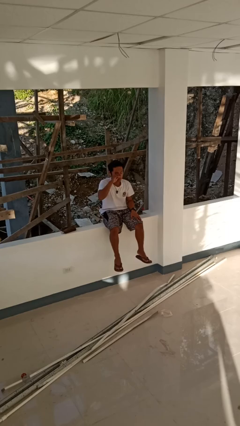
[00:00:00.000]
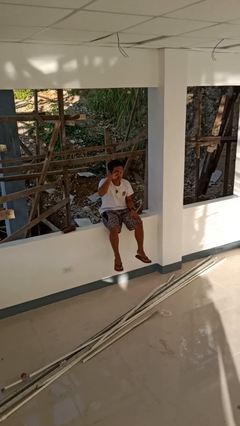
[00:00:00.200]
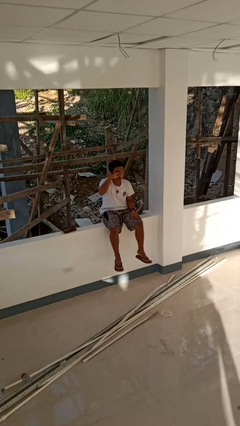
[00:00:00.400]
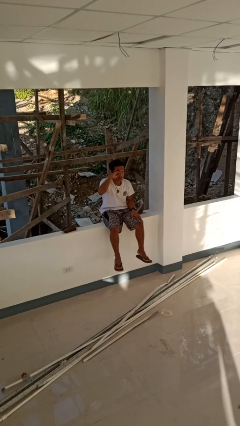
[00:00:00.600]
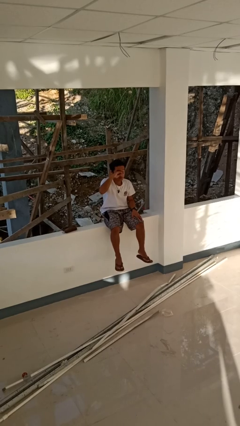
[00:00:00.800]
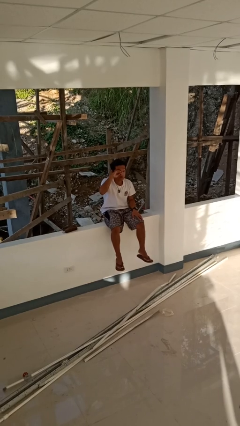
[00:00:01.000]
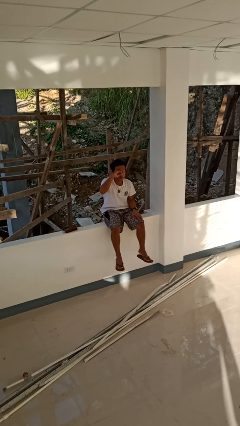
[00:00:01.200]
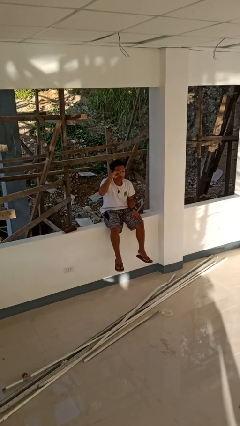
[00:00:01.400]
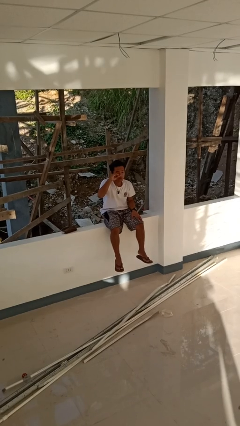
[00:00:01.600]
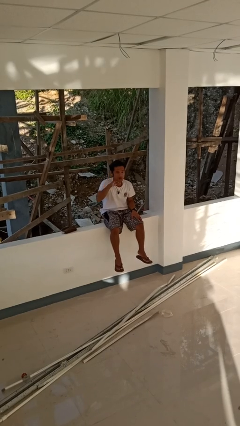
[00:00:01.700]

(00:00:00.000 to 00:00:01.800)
person rubs eyes

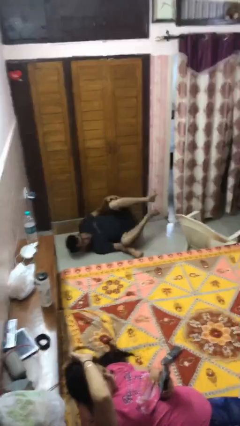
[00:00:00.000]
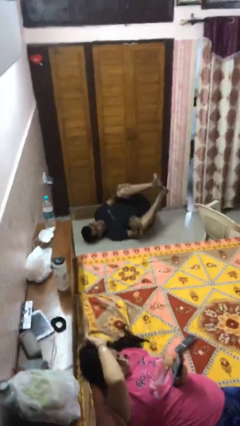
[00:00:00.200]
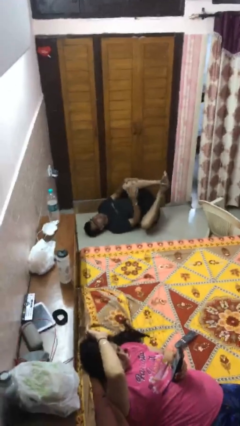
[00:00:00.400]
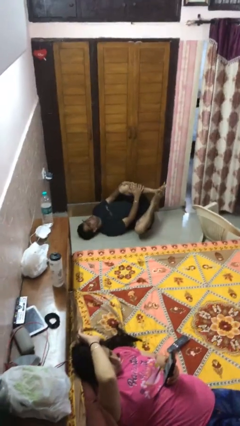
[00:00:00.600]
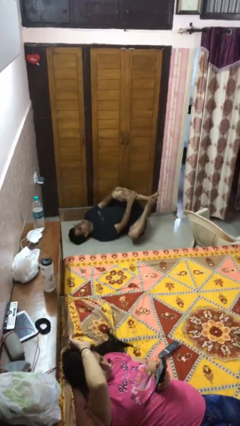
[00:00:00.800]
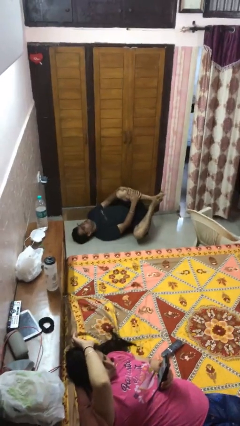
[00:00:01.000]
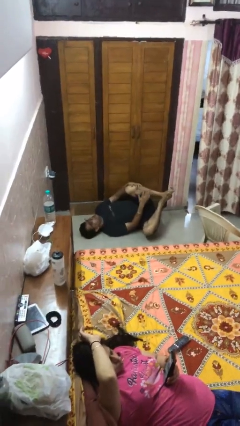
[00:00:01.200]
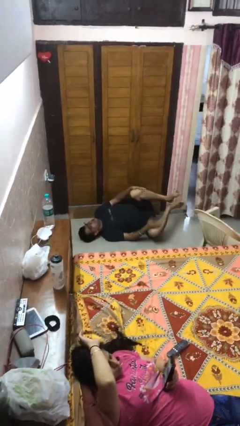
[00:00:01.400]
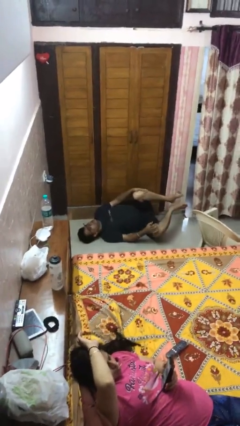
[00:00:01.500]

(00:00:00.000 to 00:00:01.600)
person lies down on floor

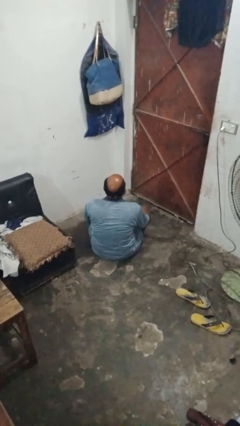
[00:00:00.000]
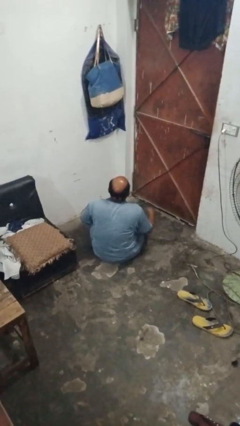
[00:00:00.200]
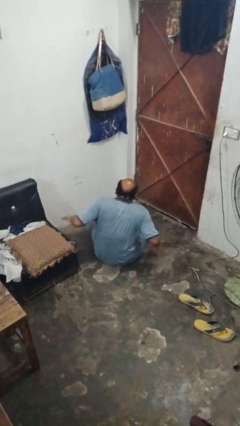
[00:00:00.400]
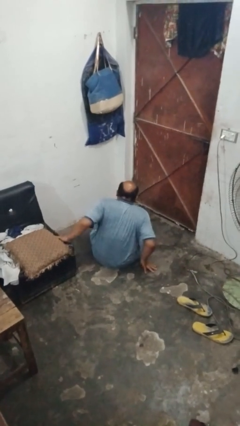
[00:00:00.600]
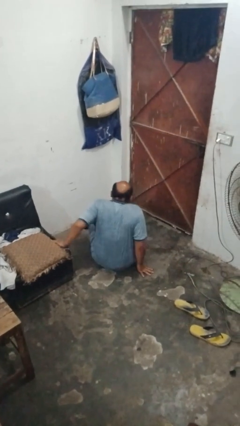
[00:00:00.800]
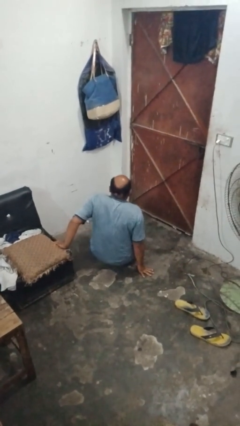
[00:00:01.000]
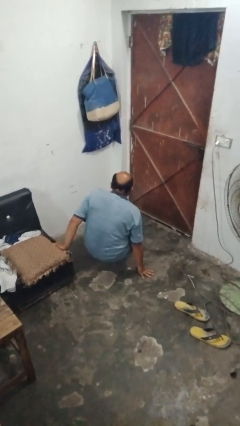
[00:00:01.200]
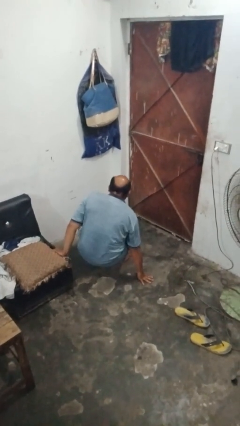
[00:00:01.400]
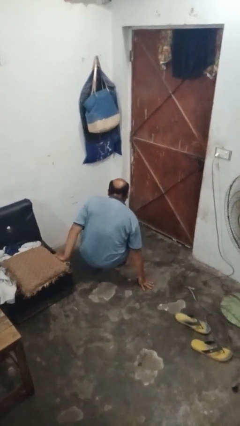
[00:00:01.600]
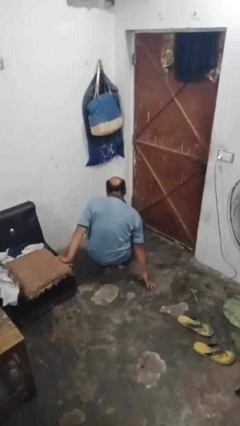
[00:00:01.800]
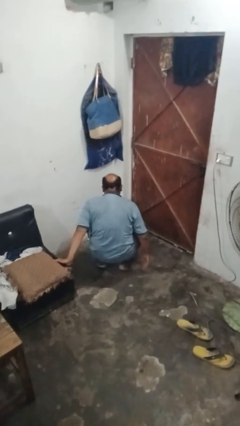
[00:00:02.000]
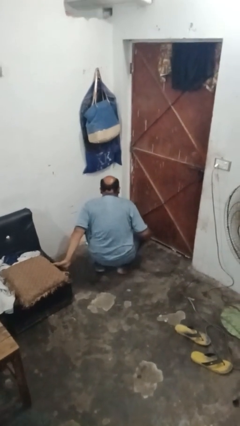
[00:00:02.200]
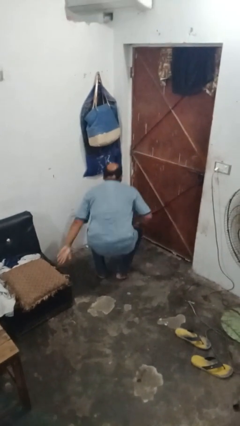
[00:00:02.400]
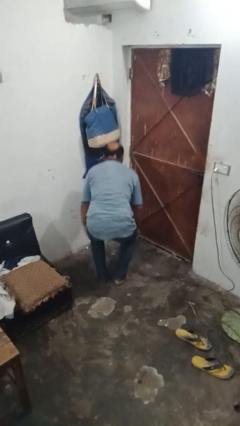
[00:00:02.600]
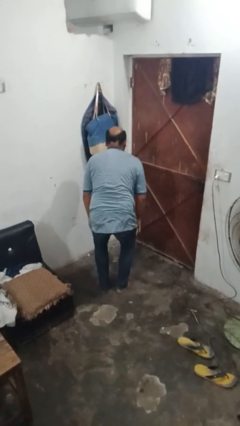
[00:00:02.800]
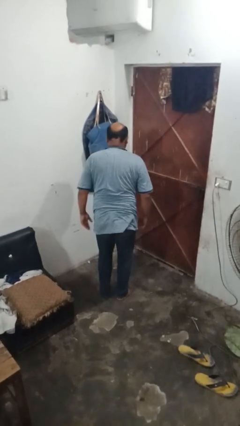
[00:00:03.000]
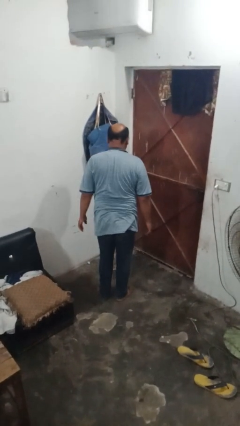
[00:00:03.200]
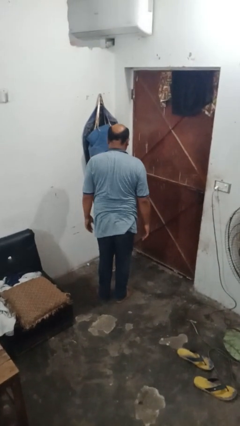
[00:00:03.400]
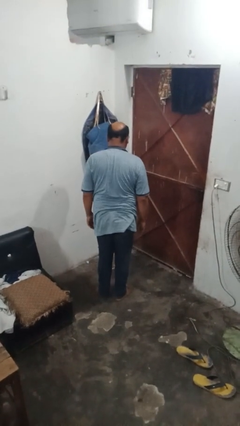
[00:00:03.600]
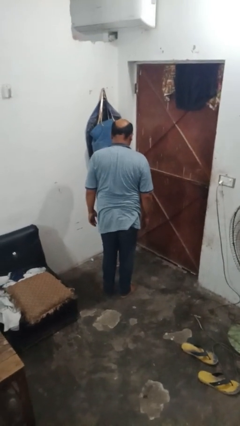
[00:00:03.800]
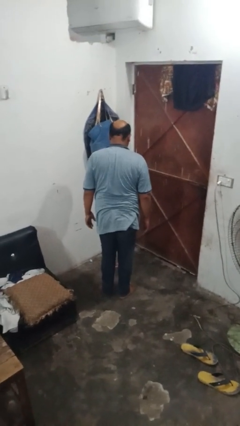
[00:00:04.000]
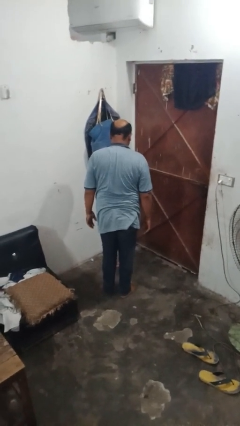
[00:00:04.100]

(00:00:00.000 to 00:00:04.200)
person stands up from floor

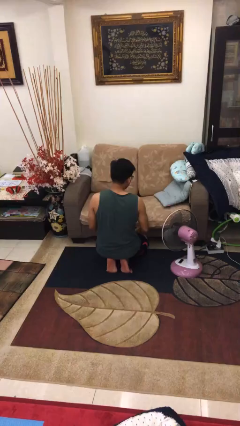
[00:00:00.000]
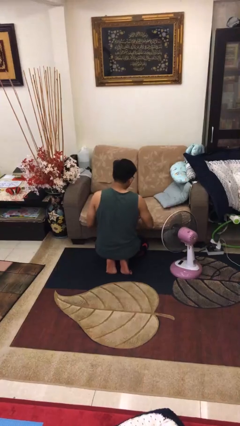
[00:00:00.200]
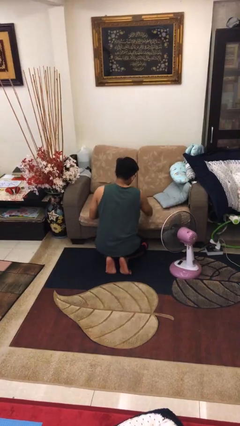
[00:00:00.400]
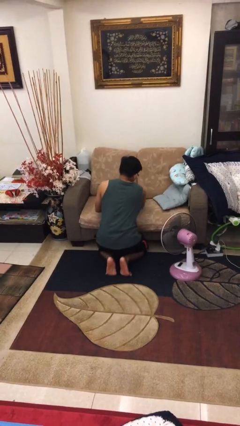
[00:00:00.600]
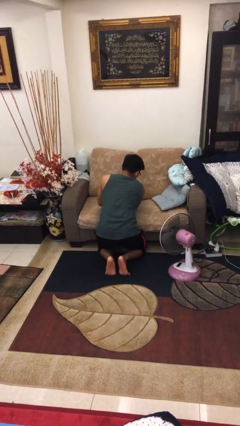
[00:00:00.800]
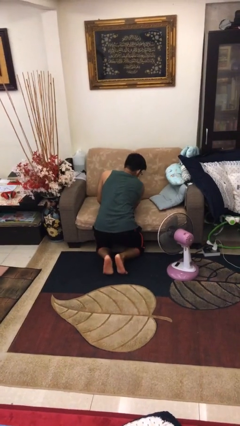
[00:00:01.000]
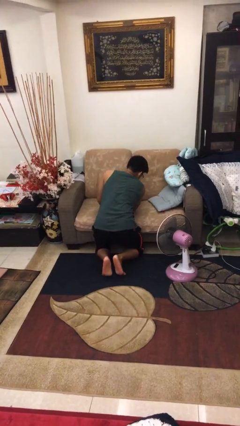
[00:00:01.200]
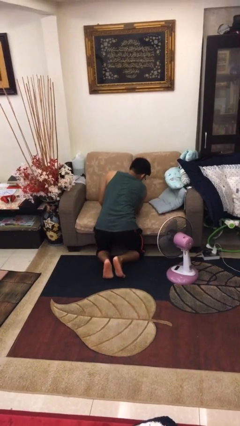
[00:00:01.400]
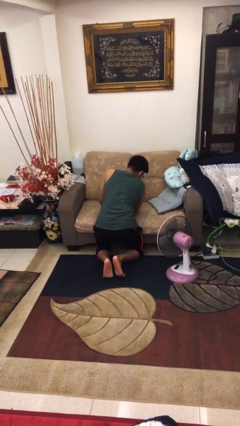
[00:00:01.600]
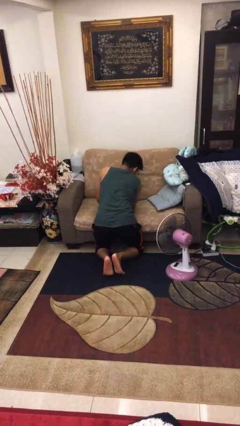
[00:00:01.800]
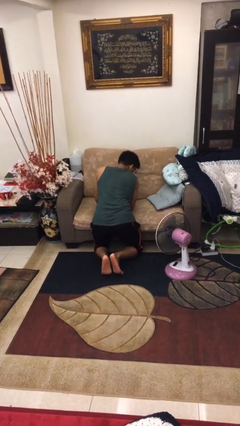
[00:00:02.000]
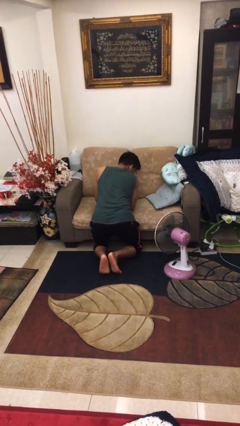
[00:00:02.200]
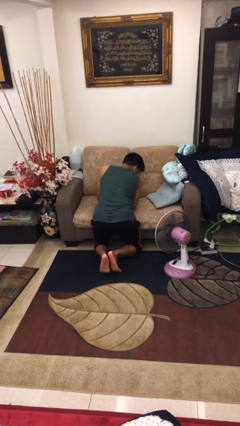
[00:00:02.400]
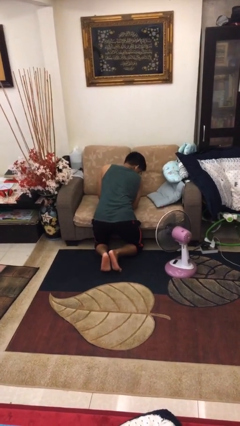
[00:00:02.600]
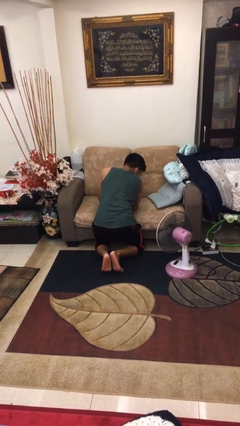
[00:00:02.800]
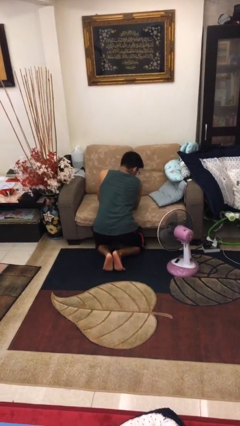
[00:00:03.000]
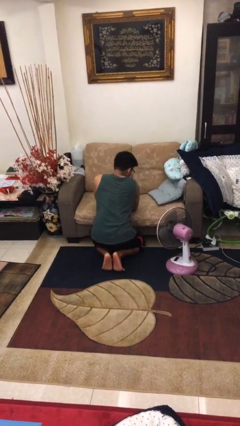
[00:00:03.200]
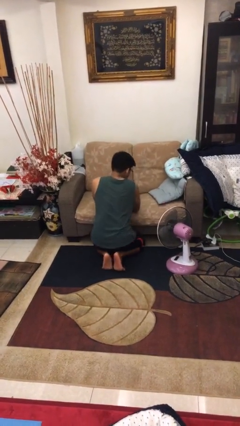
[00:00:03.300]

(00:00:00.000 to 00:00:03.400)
person searches in couch

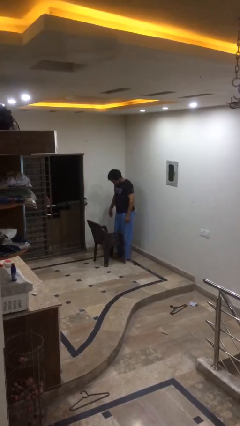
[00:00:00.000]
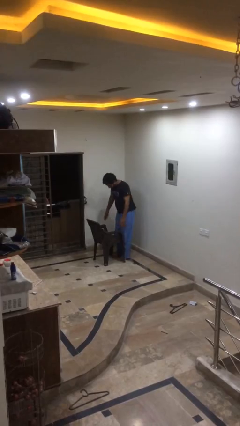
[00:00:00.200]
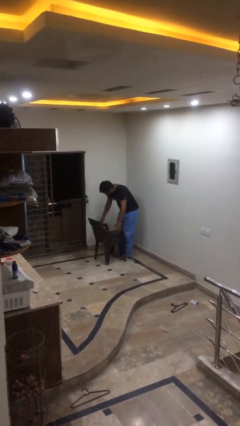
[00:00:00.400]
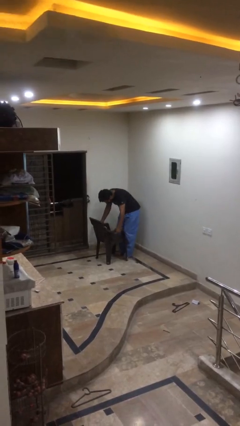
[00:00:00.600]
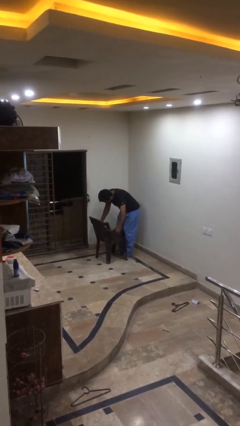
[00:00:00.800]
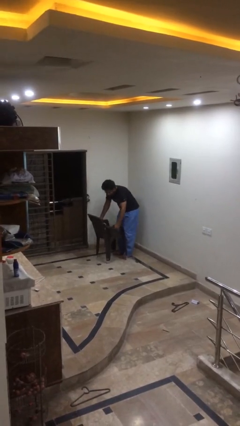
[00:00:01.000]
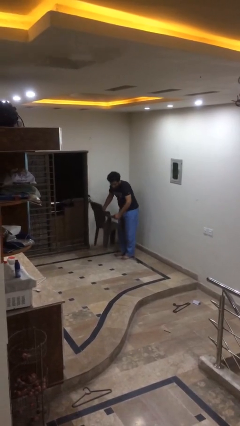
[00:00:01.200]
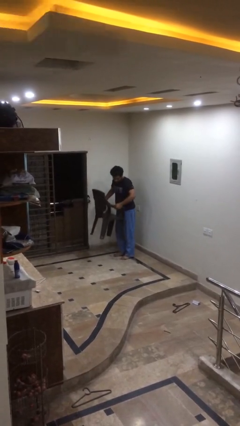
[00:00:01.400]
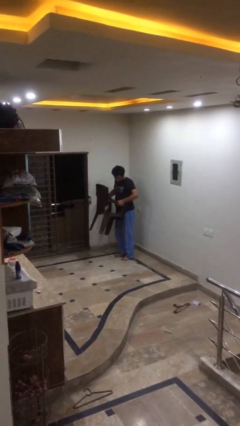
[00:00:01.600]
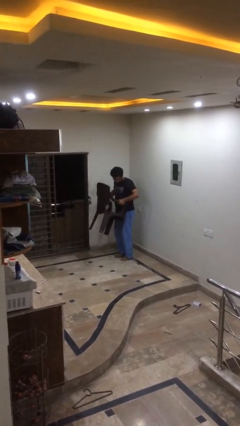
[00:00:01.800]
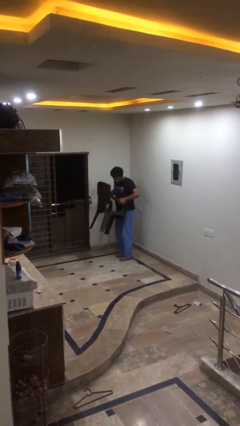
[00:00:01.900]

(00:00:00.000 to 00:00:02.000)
person picks up object from floor

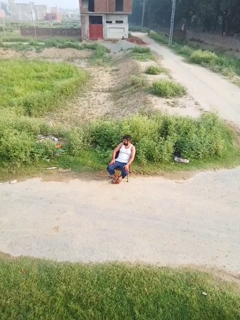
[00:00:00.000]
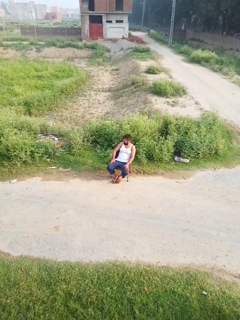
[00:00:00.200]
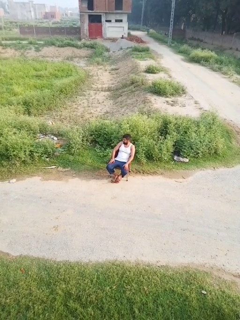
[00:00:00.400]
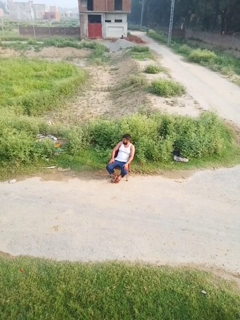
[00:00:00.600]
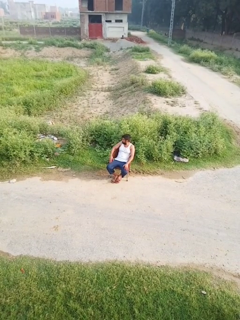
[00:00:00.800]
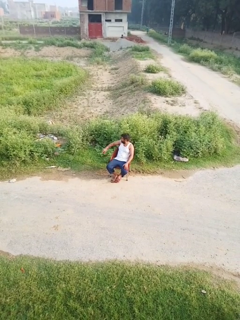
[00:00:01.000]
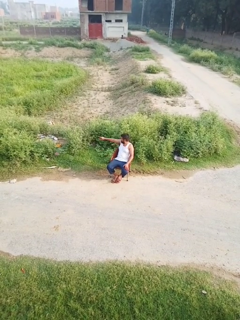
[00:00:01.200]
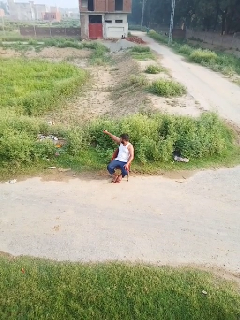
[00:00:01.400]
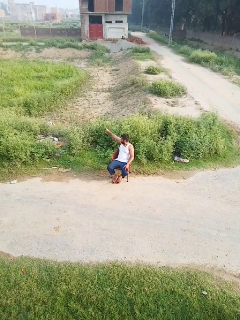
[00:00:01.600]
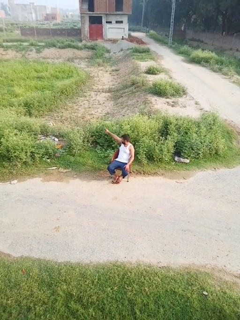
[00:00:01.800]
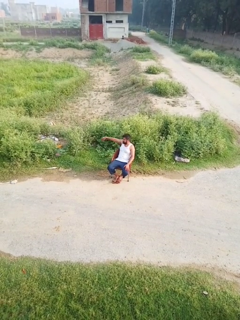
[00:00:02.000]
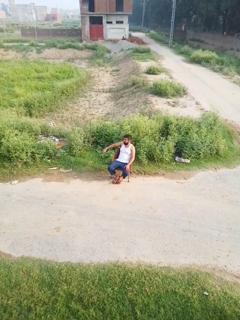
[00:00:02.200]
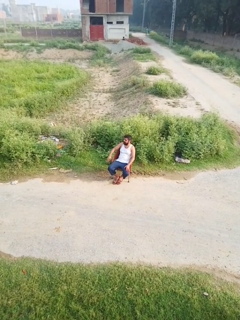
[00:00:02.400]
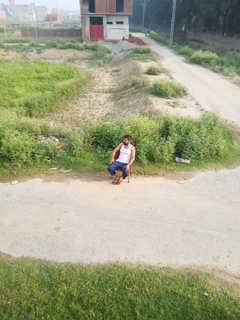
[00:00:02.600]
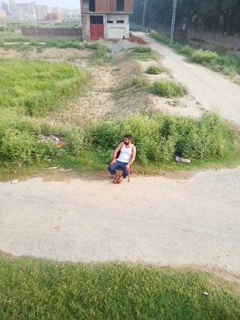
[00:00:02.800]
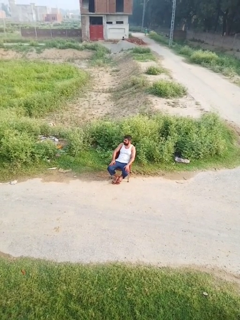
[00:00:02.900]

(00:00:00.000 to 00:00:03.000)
person points at person

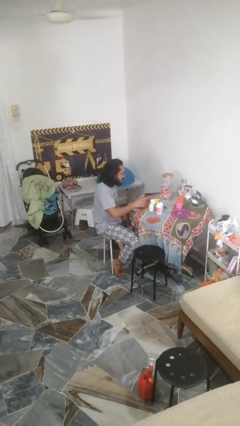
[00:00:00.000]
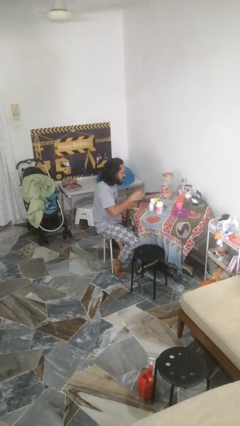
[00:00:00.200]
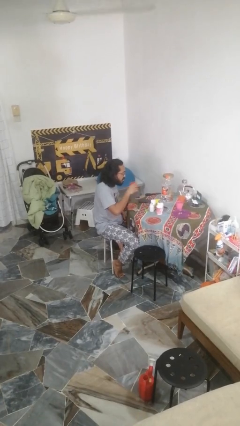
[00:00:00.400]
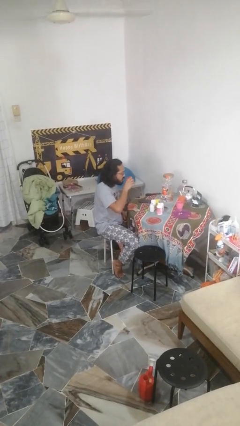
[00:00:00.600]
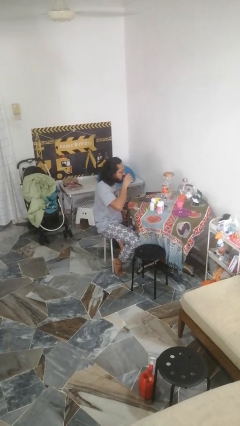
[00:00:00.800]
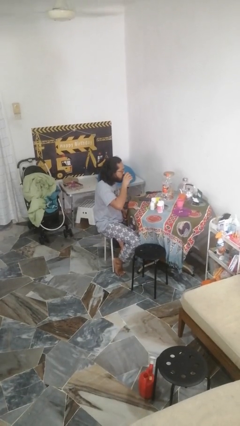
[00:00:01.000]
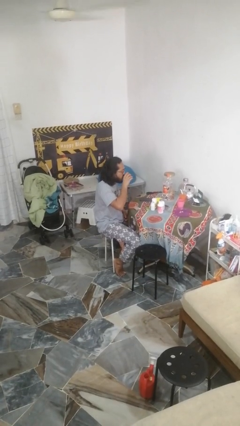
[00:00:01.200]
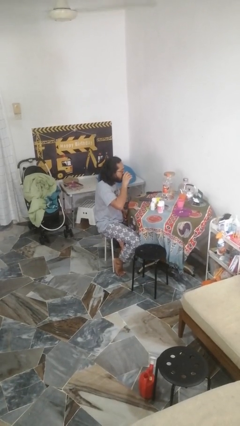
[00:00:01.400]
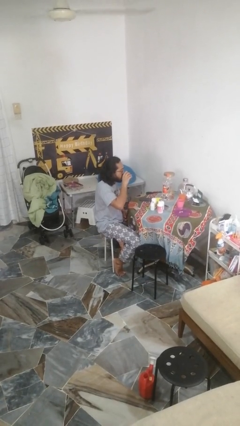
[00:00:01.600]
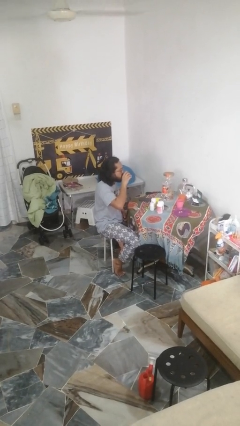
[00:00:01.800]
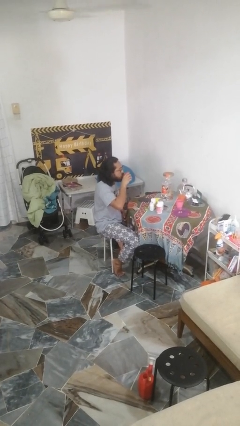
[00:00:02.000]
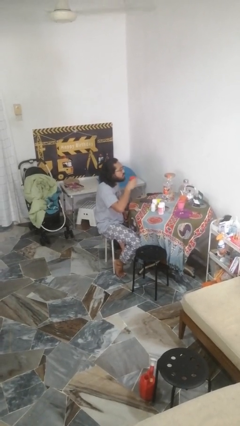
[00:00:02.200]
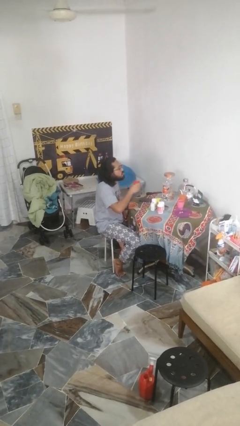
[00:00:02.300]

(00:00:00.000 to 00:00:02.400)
person drinks from cup
